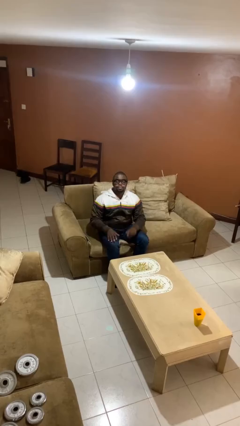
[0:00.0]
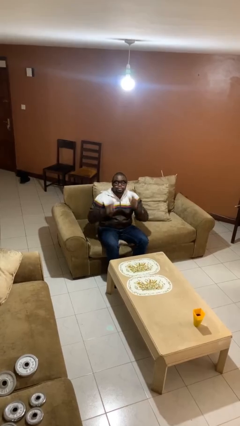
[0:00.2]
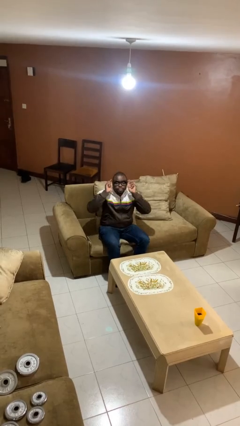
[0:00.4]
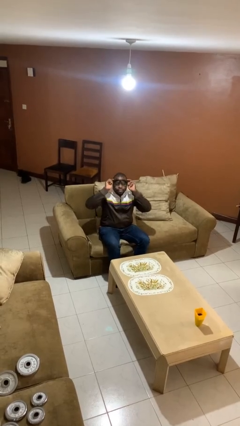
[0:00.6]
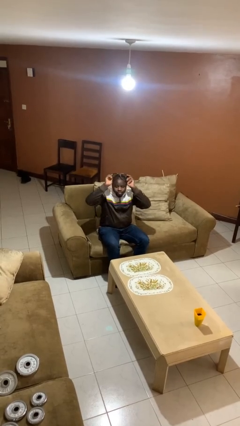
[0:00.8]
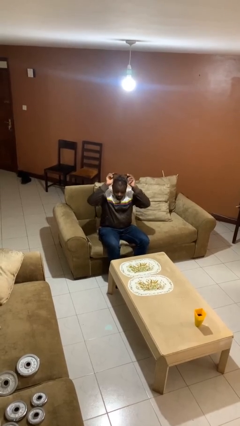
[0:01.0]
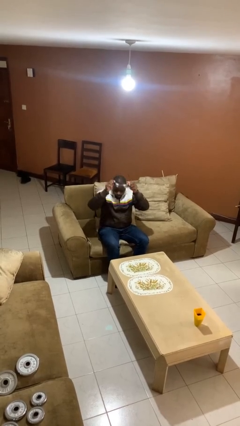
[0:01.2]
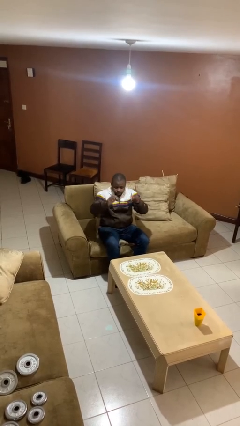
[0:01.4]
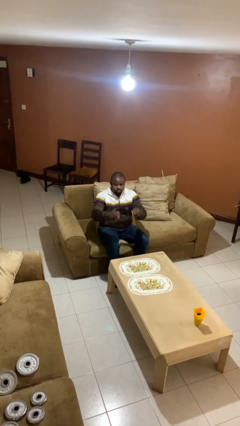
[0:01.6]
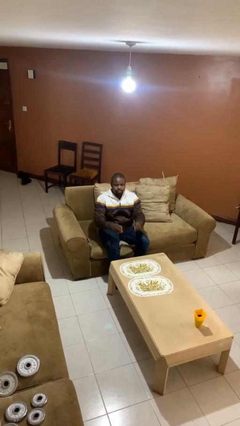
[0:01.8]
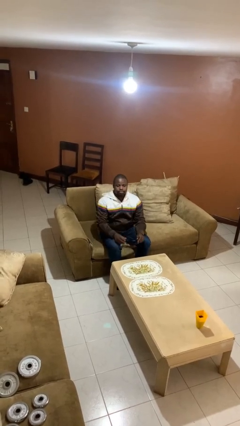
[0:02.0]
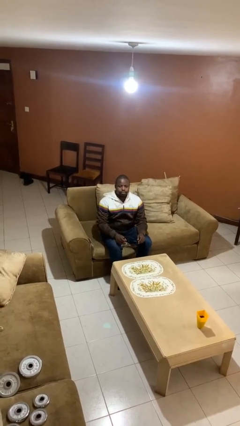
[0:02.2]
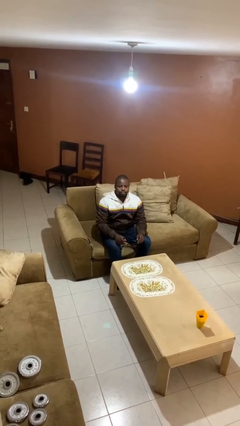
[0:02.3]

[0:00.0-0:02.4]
person takes off glasses

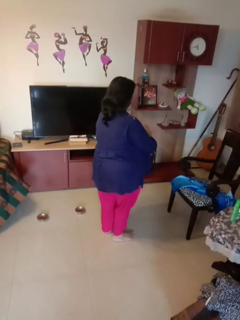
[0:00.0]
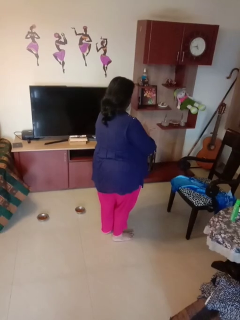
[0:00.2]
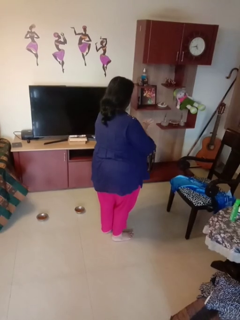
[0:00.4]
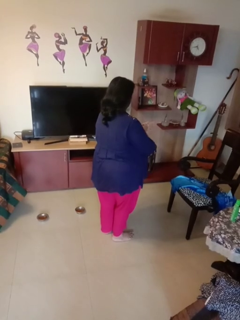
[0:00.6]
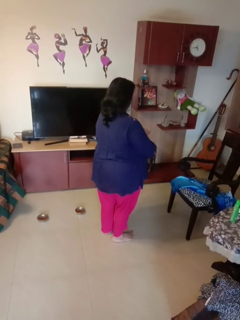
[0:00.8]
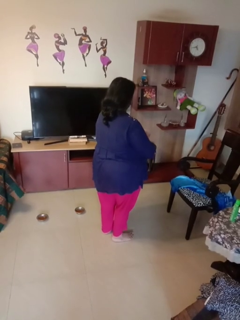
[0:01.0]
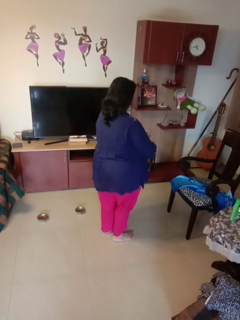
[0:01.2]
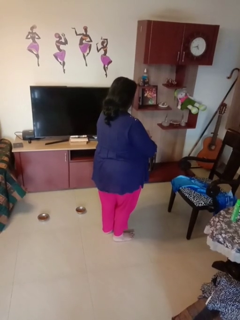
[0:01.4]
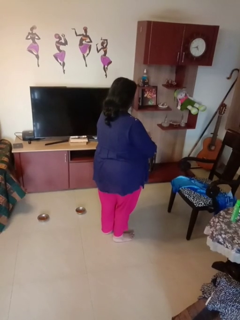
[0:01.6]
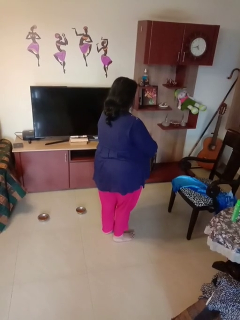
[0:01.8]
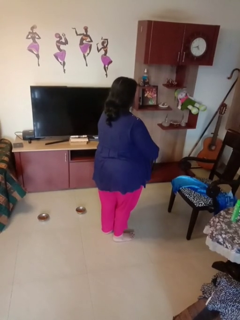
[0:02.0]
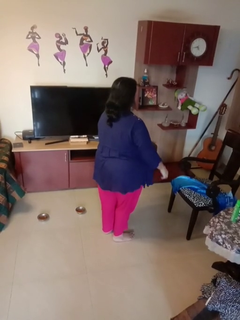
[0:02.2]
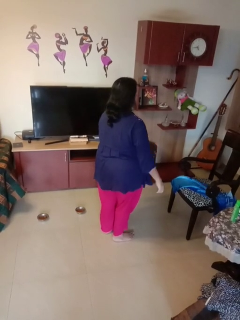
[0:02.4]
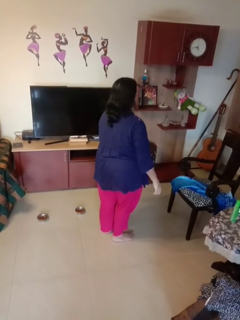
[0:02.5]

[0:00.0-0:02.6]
person puts on wristwatch

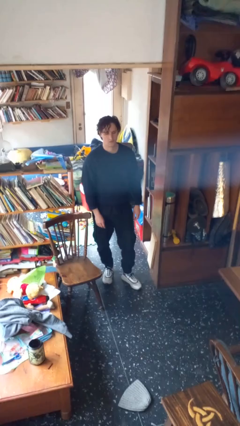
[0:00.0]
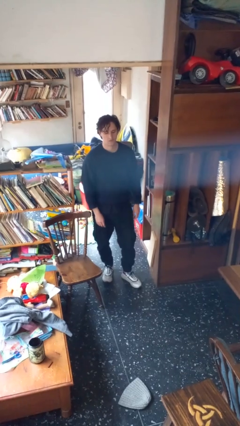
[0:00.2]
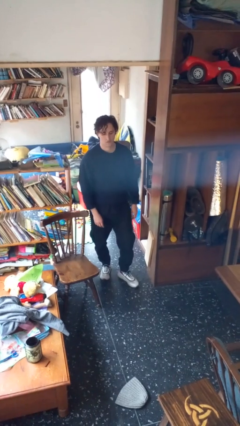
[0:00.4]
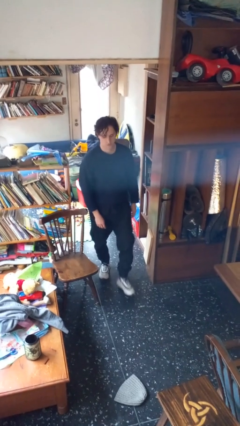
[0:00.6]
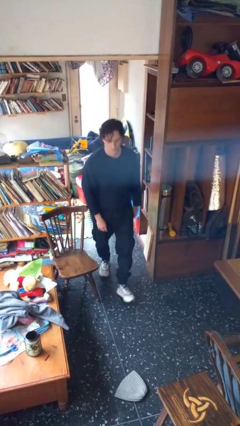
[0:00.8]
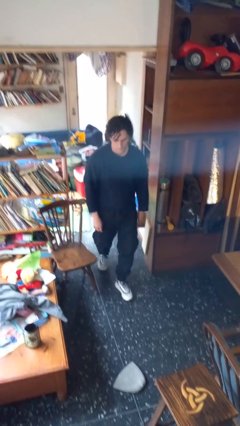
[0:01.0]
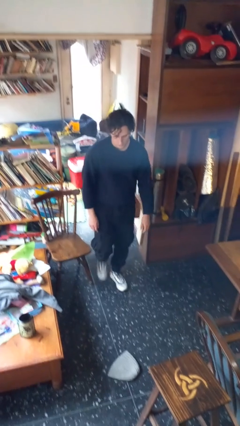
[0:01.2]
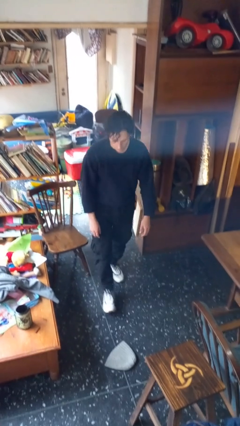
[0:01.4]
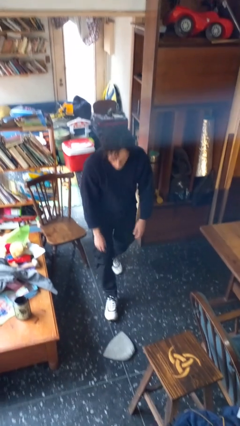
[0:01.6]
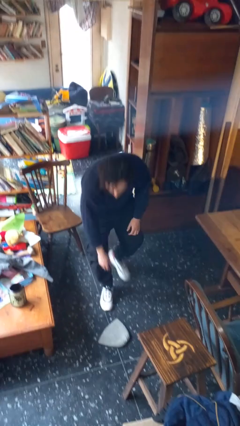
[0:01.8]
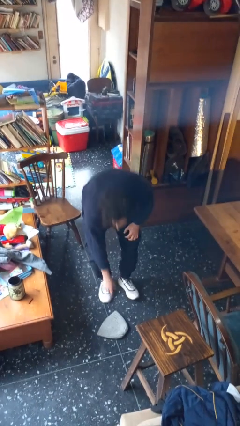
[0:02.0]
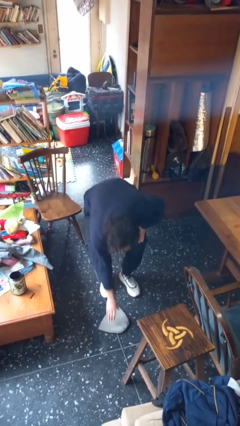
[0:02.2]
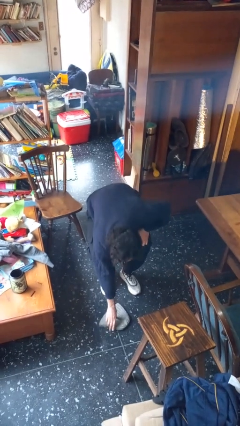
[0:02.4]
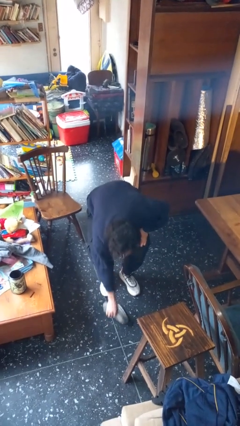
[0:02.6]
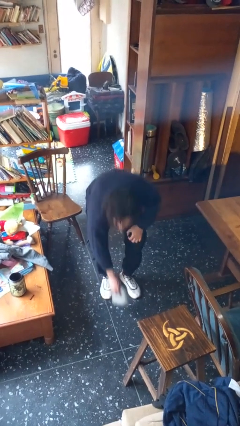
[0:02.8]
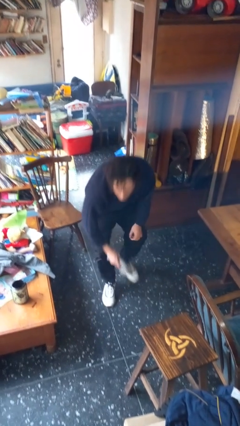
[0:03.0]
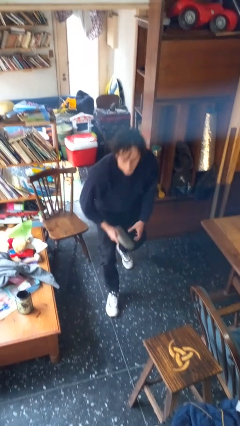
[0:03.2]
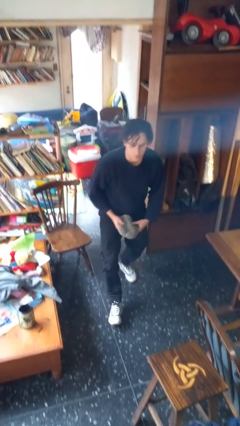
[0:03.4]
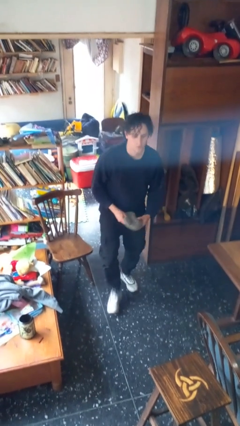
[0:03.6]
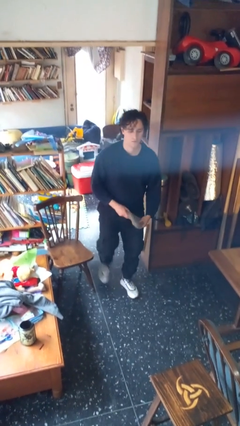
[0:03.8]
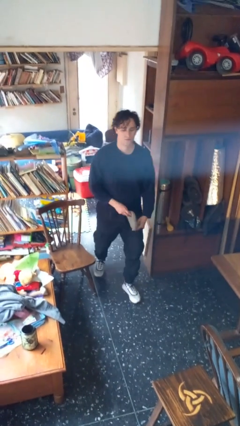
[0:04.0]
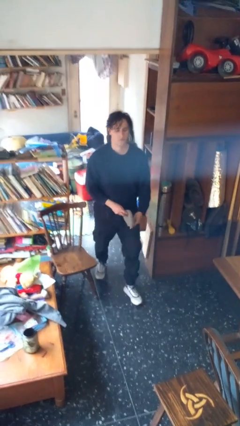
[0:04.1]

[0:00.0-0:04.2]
person picks up object from floor

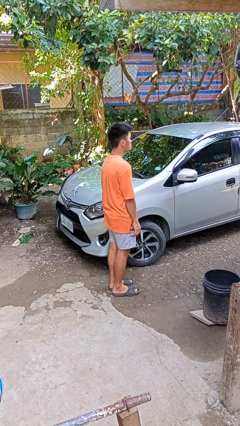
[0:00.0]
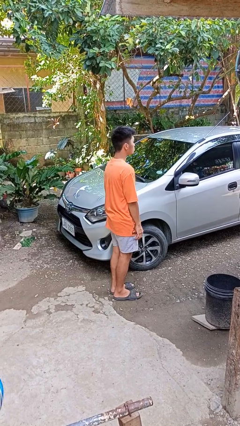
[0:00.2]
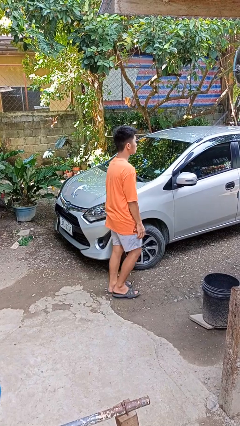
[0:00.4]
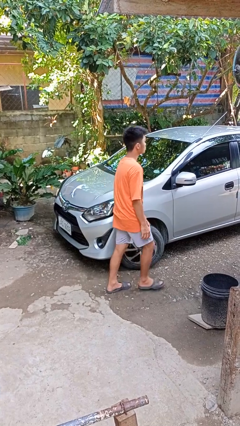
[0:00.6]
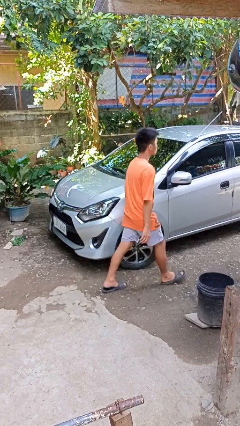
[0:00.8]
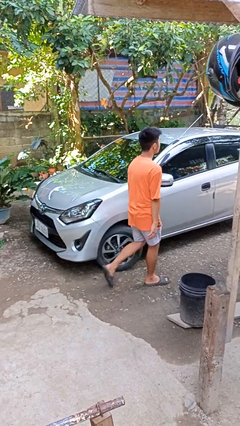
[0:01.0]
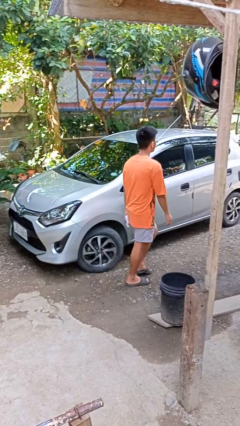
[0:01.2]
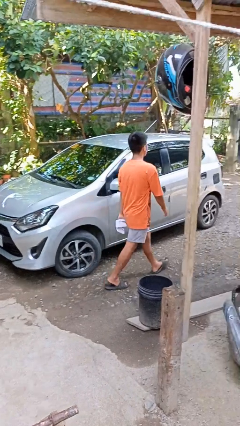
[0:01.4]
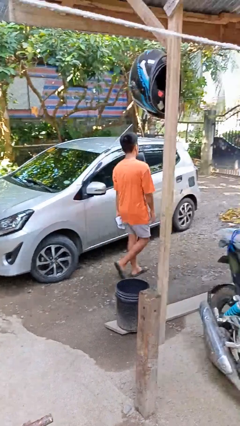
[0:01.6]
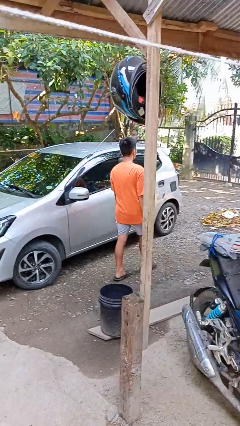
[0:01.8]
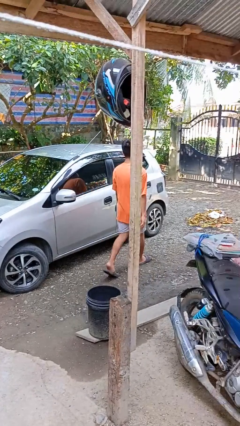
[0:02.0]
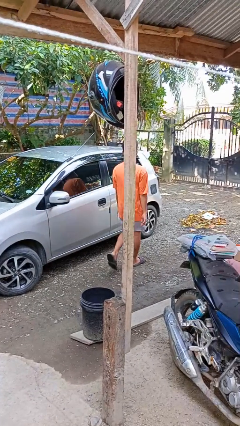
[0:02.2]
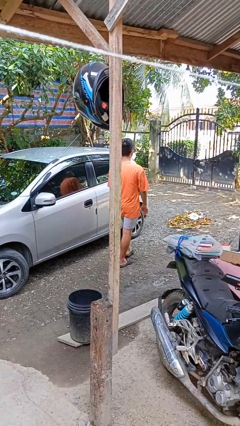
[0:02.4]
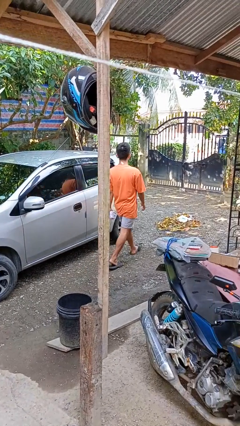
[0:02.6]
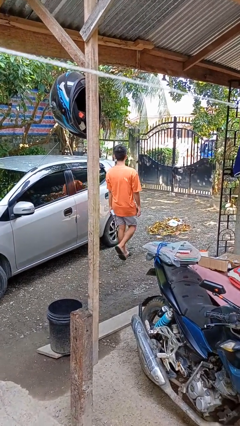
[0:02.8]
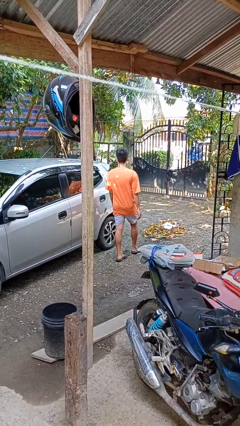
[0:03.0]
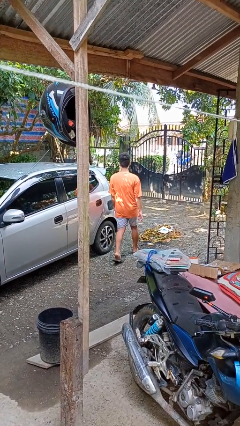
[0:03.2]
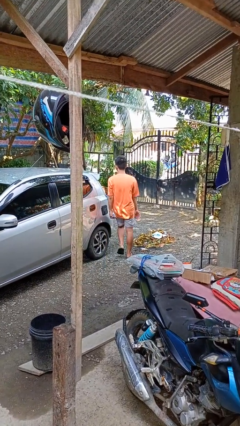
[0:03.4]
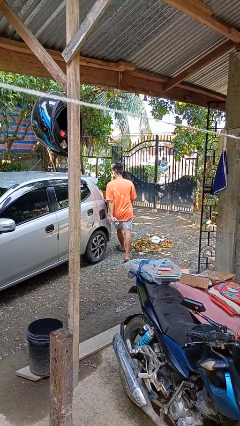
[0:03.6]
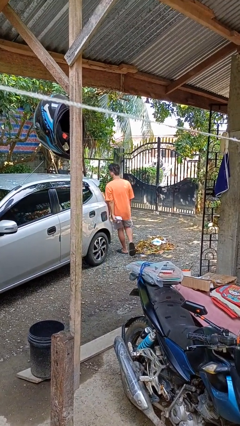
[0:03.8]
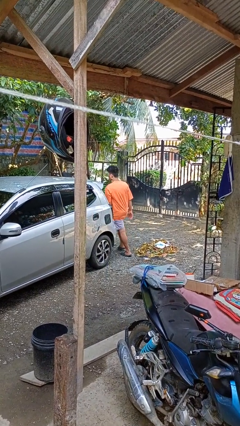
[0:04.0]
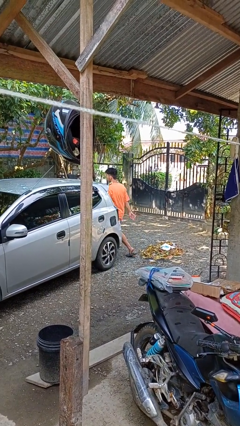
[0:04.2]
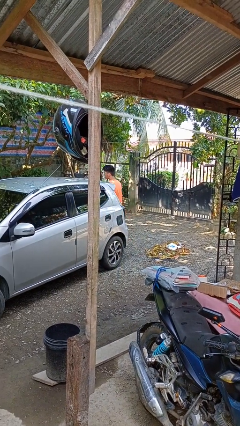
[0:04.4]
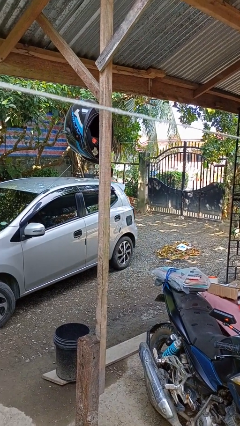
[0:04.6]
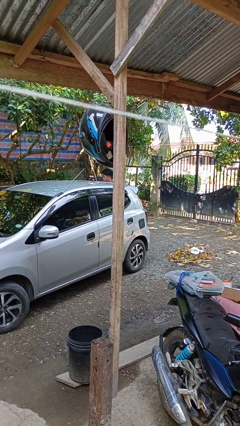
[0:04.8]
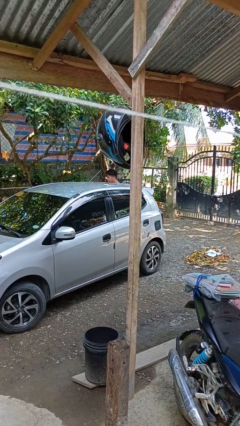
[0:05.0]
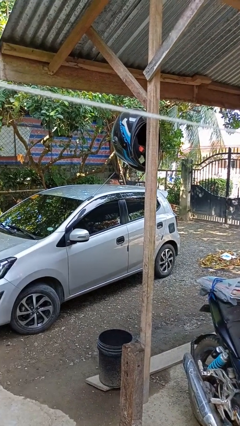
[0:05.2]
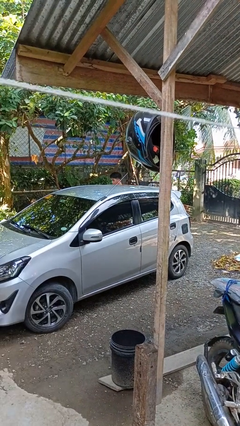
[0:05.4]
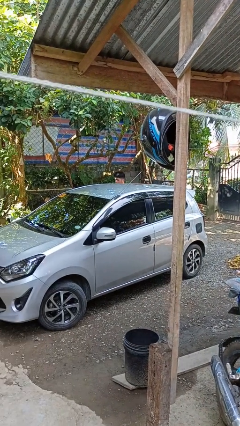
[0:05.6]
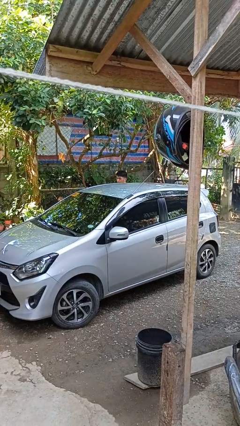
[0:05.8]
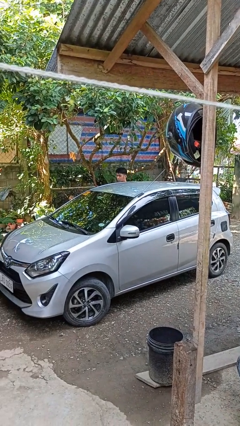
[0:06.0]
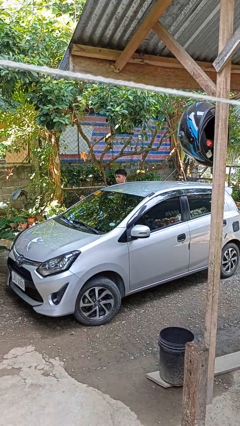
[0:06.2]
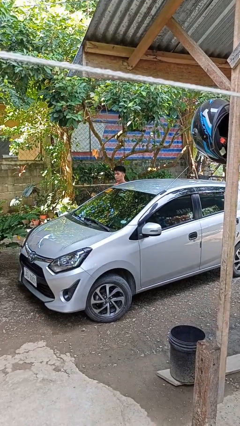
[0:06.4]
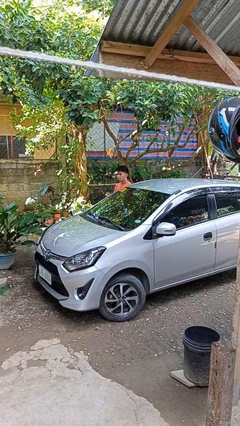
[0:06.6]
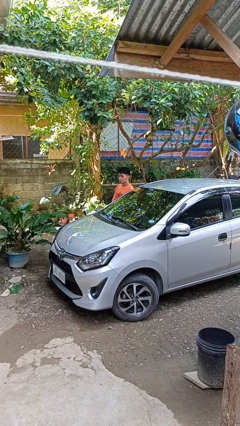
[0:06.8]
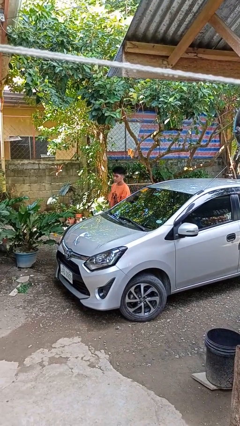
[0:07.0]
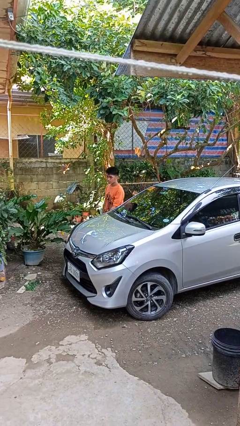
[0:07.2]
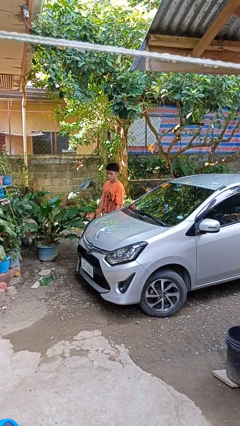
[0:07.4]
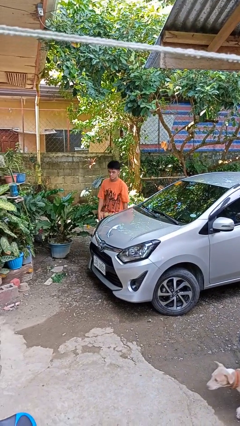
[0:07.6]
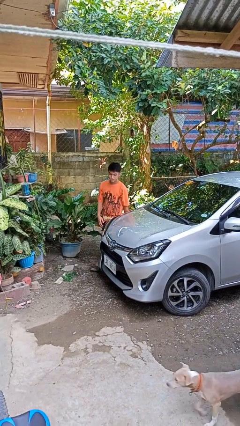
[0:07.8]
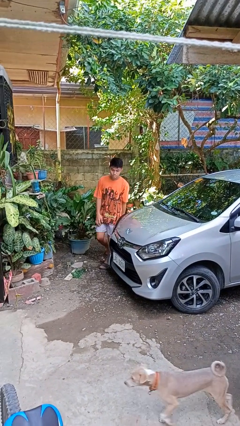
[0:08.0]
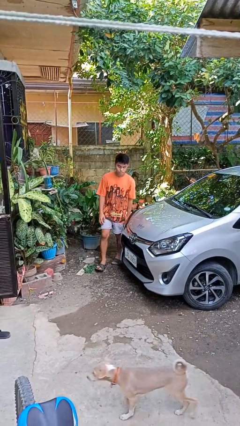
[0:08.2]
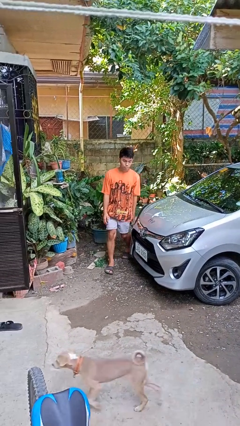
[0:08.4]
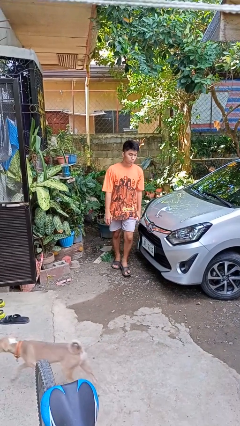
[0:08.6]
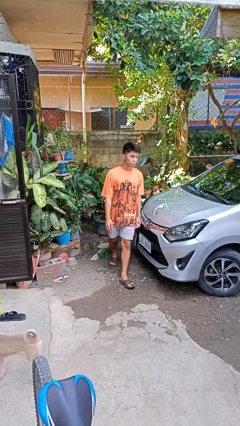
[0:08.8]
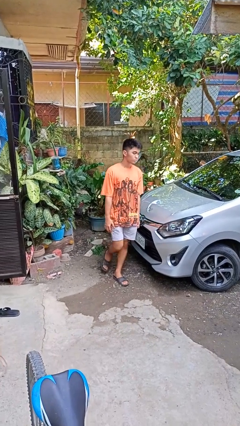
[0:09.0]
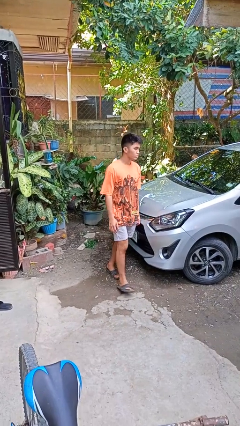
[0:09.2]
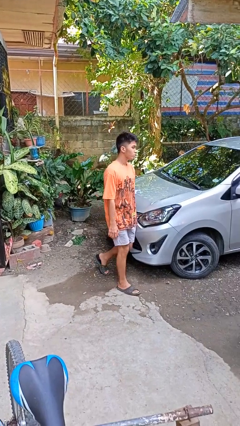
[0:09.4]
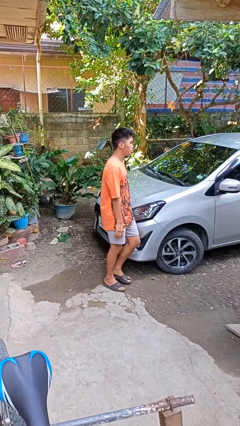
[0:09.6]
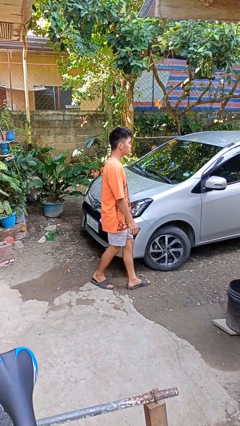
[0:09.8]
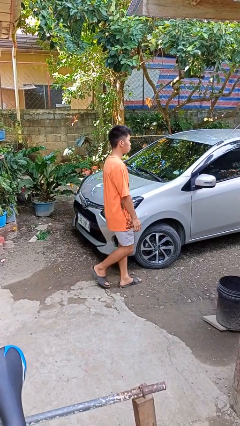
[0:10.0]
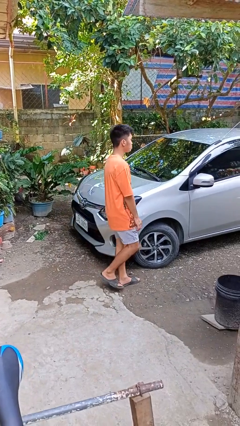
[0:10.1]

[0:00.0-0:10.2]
person walks around car
